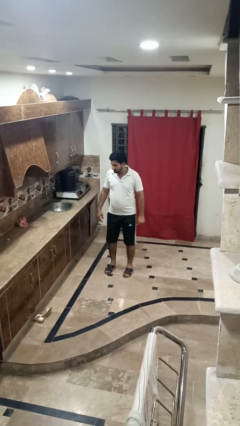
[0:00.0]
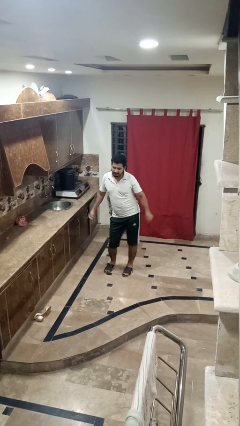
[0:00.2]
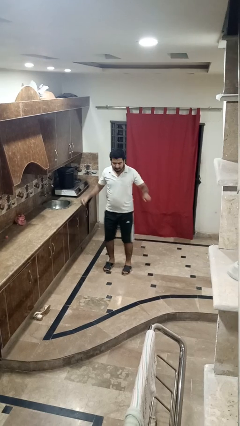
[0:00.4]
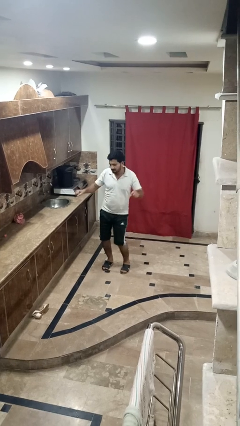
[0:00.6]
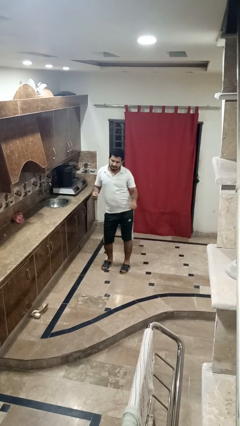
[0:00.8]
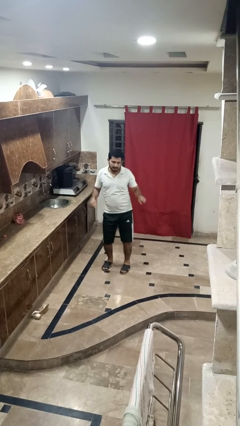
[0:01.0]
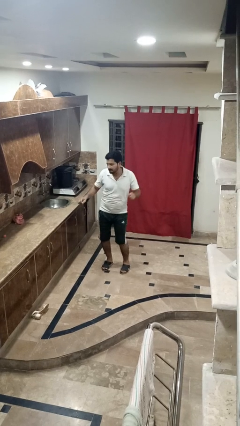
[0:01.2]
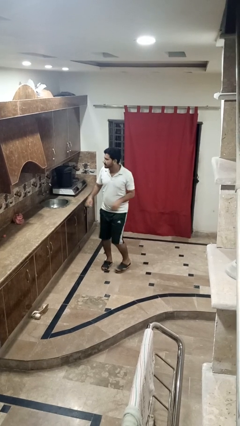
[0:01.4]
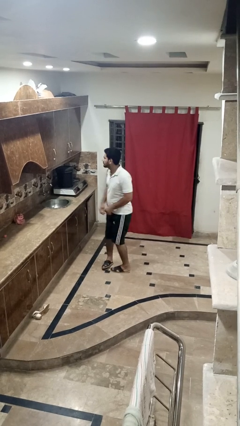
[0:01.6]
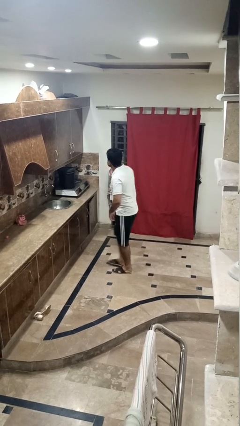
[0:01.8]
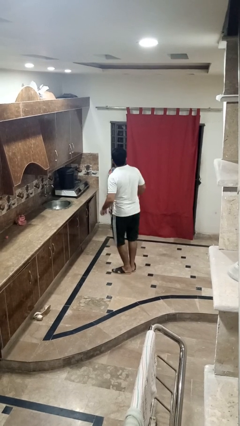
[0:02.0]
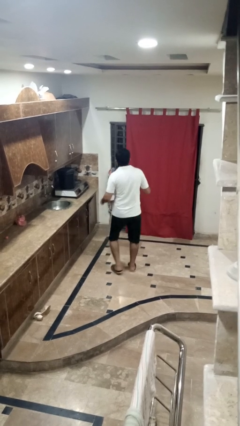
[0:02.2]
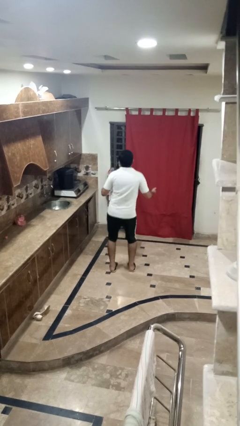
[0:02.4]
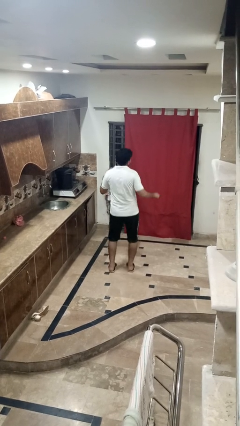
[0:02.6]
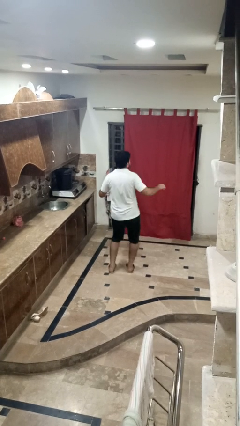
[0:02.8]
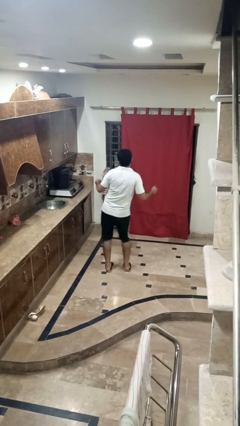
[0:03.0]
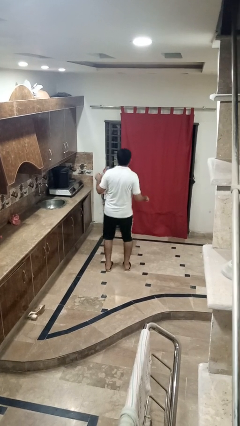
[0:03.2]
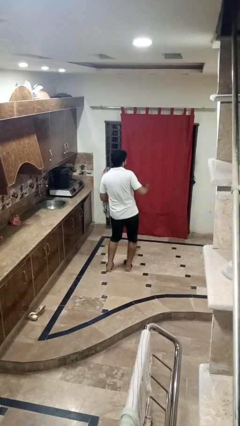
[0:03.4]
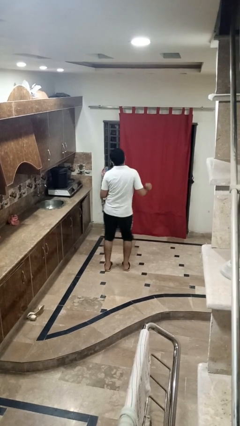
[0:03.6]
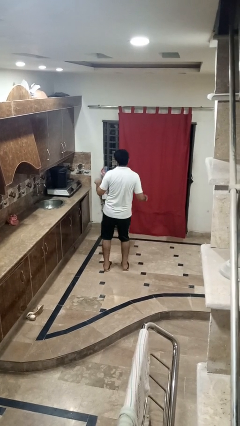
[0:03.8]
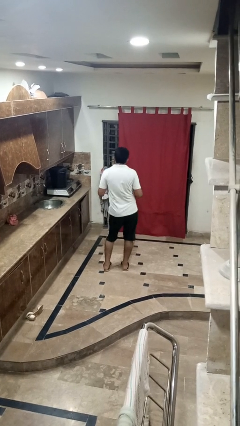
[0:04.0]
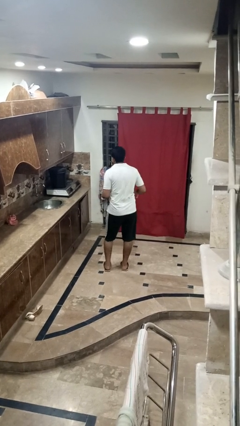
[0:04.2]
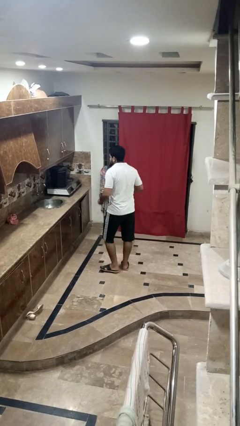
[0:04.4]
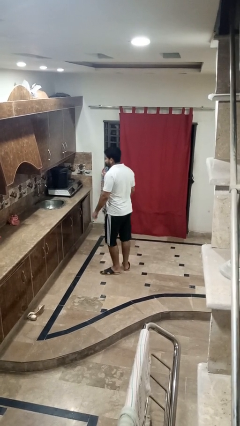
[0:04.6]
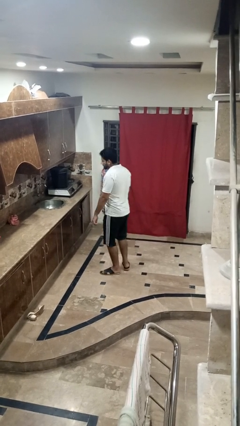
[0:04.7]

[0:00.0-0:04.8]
person wiggles hips

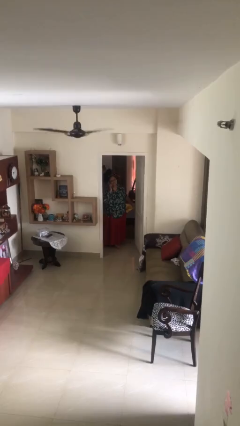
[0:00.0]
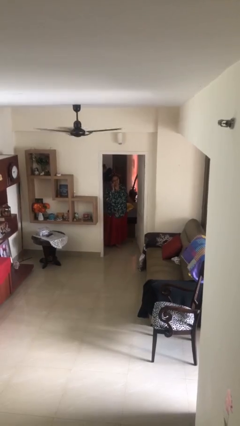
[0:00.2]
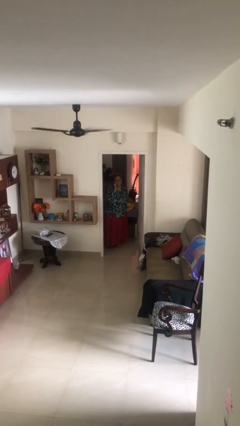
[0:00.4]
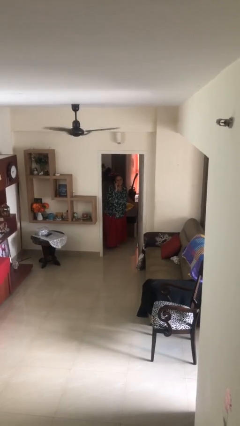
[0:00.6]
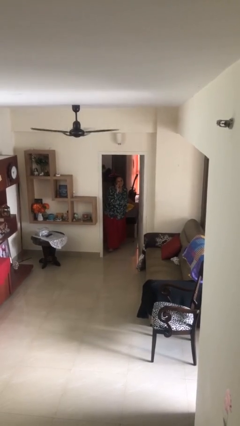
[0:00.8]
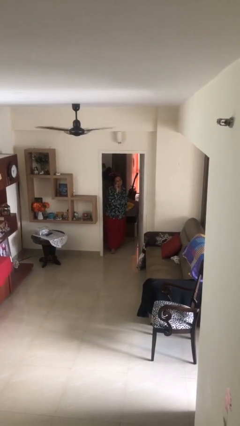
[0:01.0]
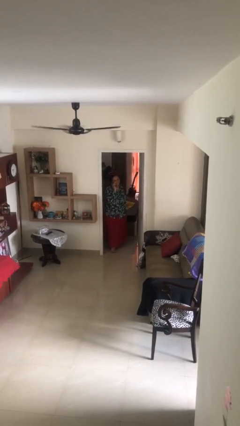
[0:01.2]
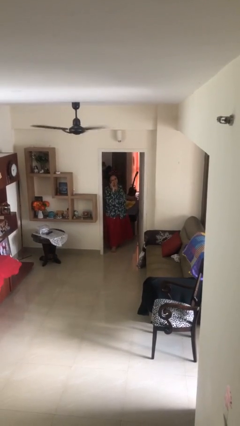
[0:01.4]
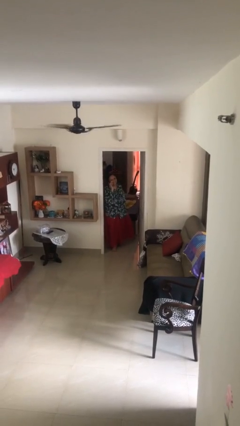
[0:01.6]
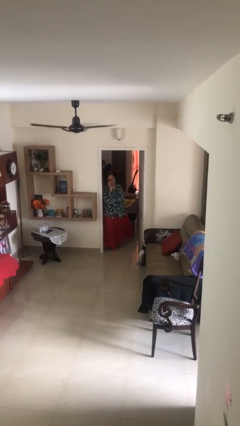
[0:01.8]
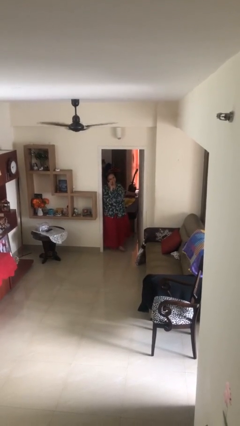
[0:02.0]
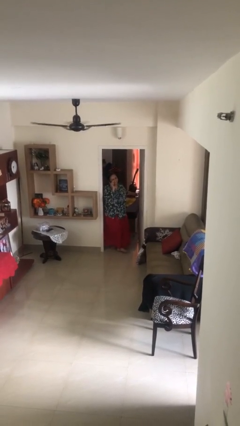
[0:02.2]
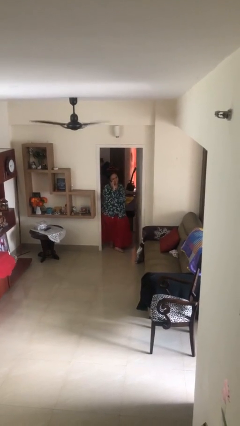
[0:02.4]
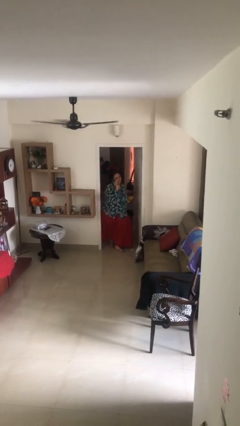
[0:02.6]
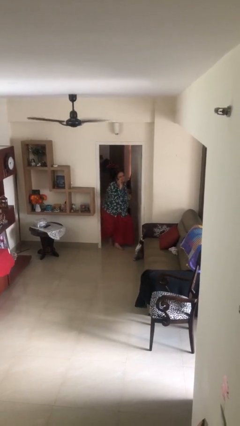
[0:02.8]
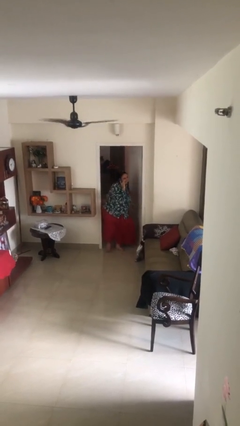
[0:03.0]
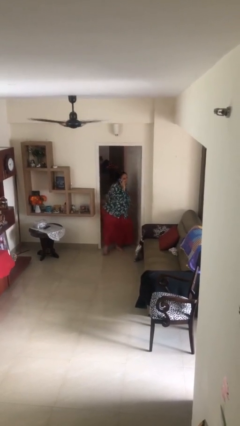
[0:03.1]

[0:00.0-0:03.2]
person enters scene through structure

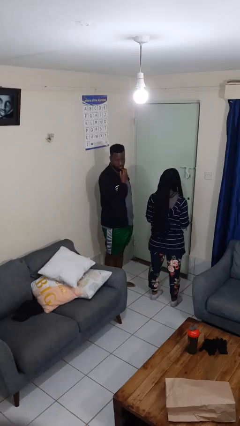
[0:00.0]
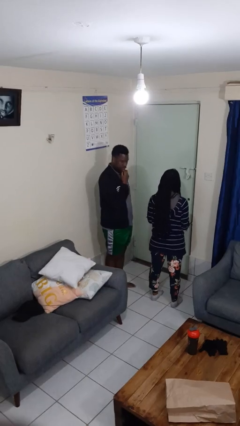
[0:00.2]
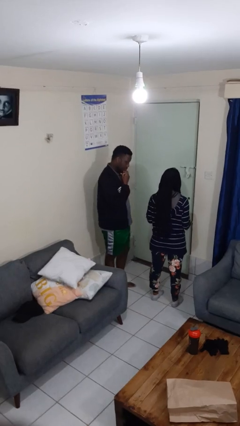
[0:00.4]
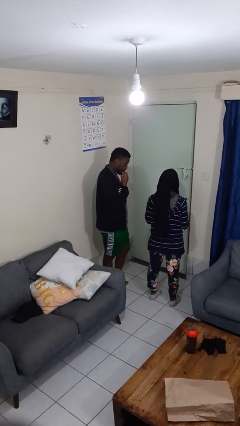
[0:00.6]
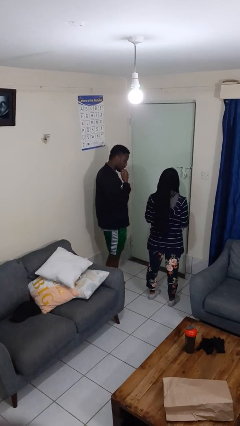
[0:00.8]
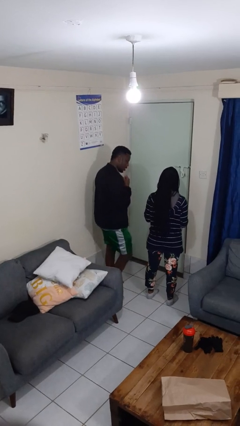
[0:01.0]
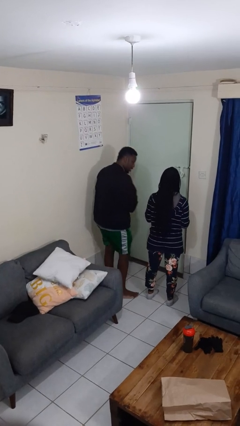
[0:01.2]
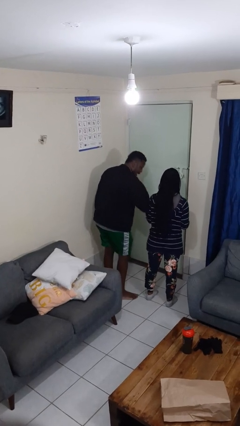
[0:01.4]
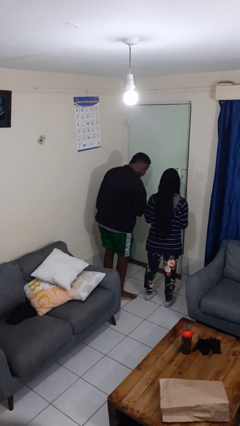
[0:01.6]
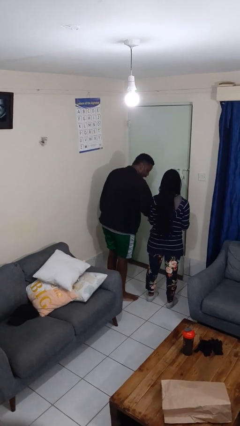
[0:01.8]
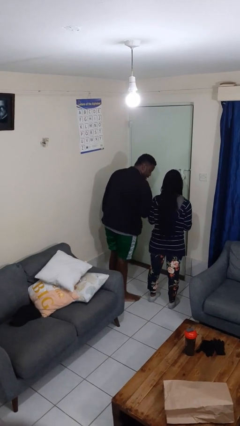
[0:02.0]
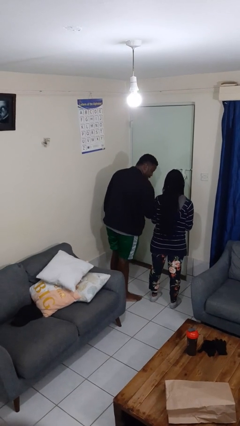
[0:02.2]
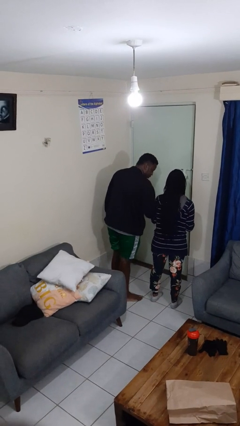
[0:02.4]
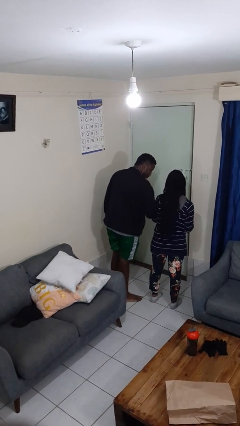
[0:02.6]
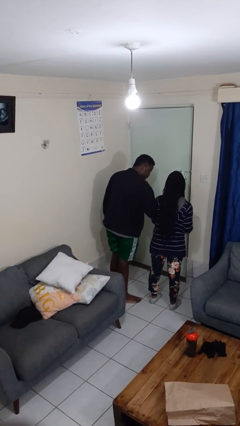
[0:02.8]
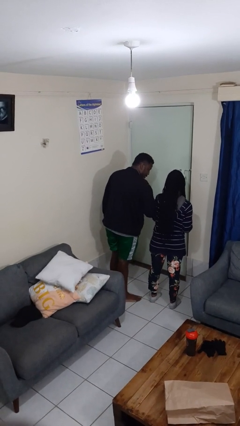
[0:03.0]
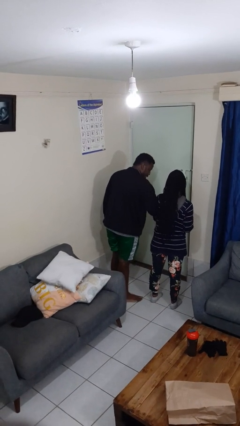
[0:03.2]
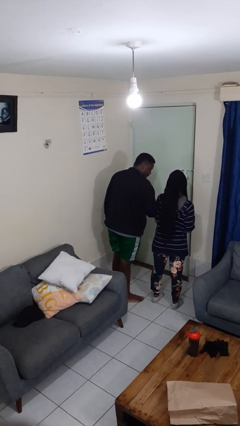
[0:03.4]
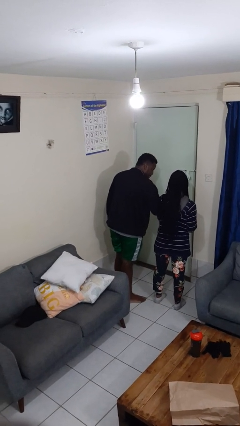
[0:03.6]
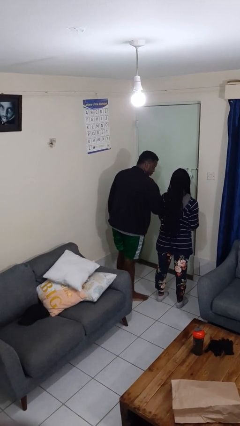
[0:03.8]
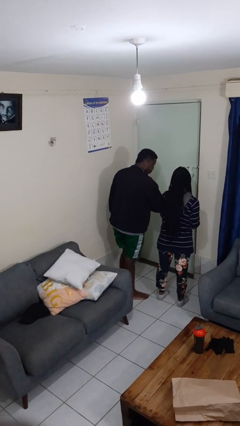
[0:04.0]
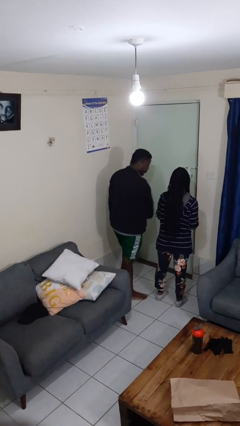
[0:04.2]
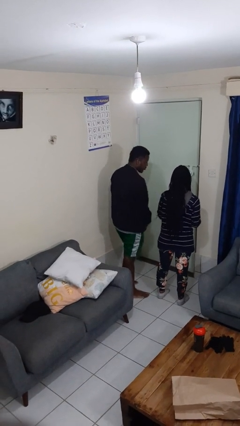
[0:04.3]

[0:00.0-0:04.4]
person nudges person with elbow

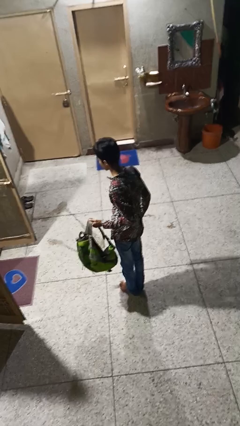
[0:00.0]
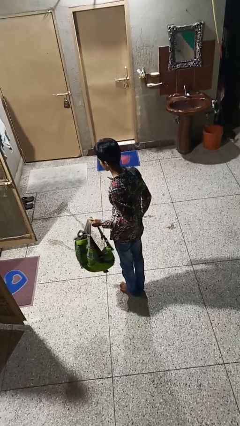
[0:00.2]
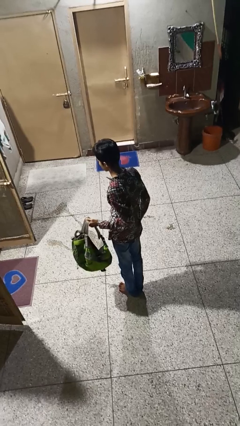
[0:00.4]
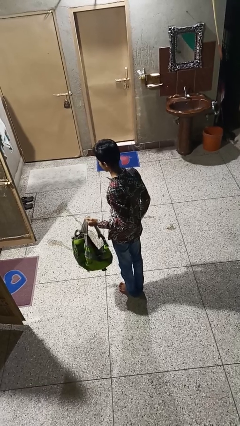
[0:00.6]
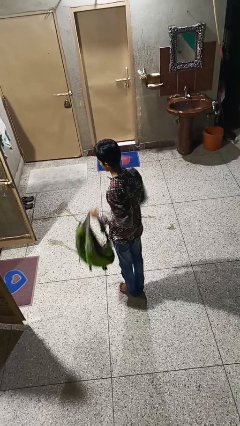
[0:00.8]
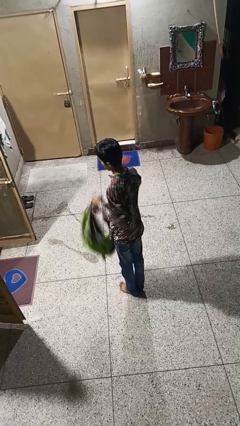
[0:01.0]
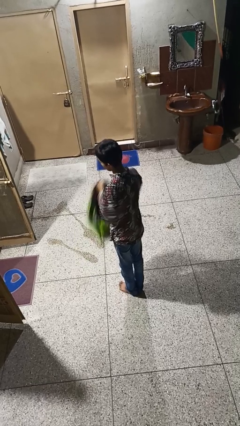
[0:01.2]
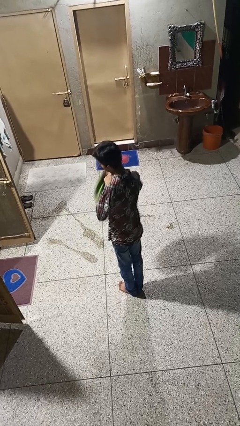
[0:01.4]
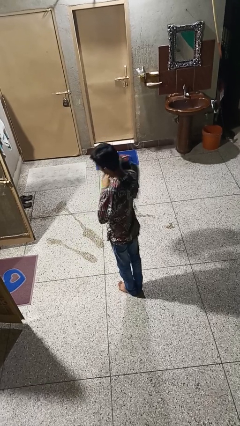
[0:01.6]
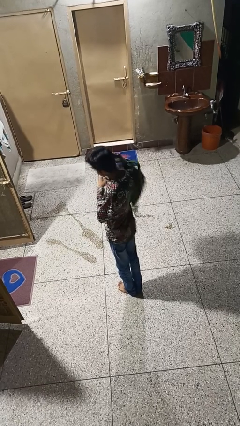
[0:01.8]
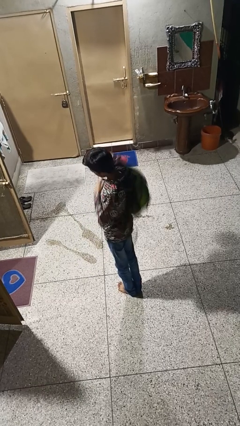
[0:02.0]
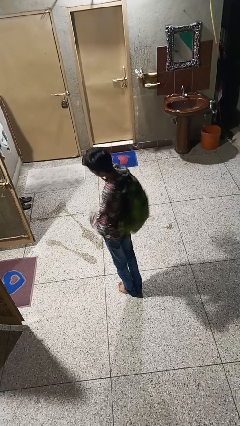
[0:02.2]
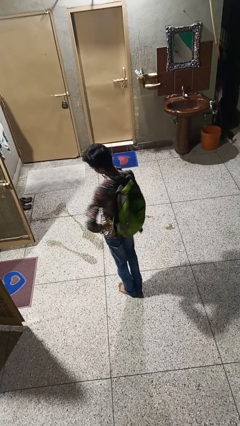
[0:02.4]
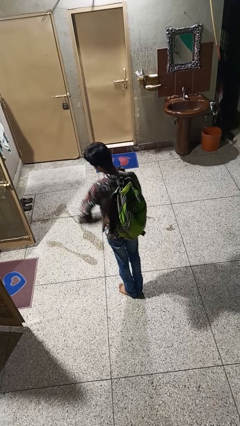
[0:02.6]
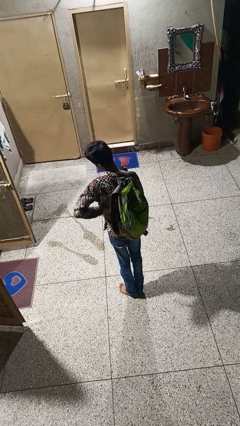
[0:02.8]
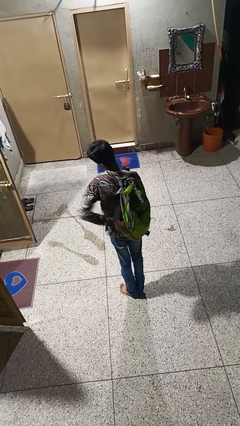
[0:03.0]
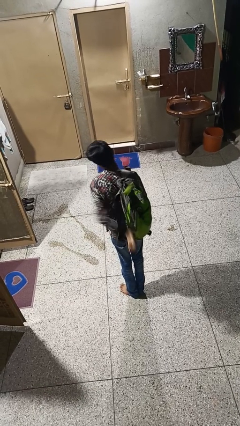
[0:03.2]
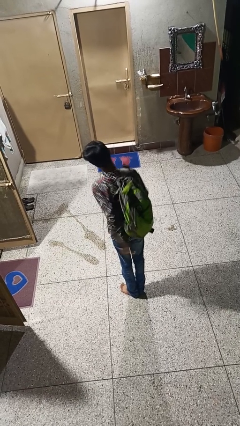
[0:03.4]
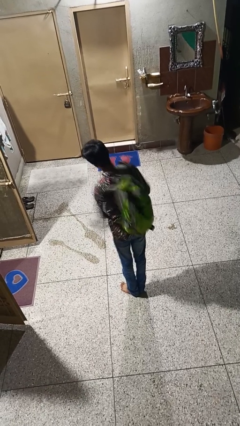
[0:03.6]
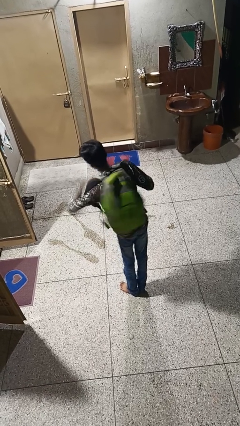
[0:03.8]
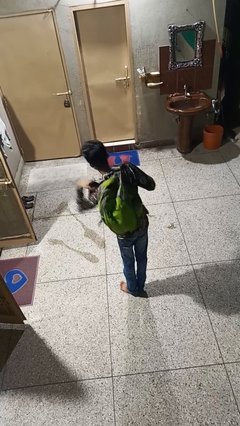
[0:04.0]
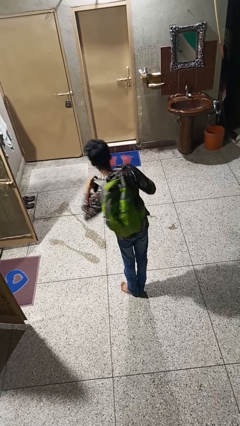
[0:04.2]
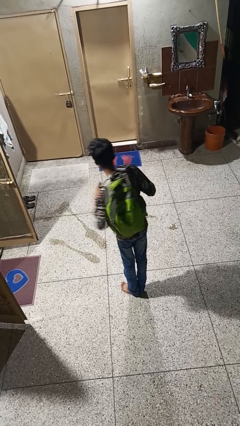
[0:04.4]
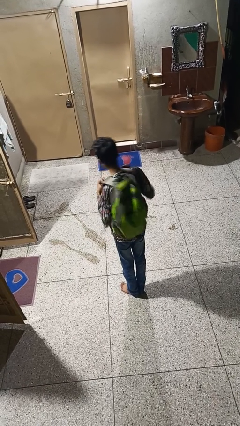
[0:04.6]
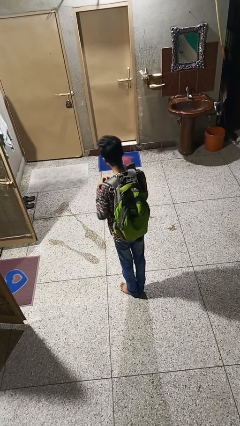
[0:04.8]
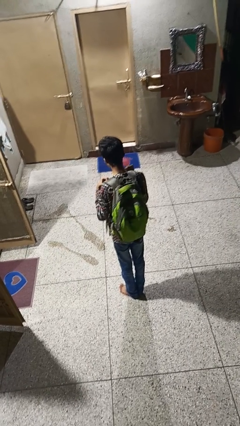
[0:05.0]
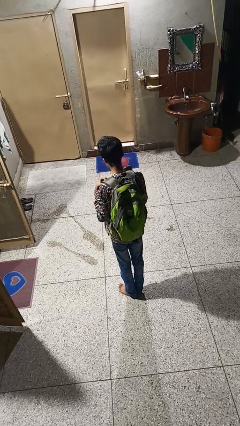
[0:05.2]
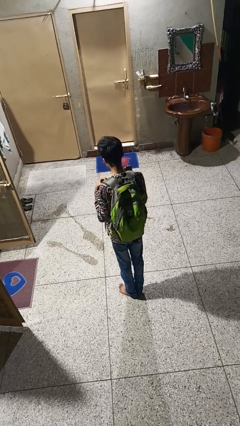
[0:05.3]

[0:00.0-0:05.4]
person puts on backpack
